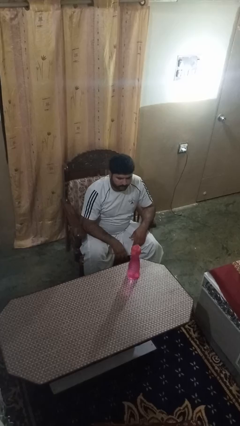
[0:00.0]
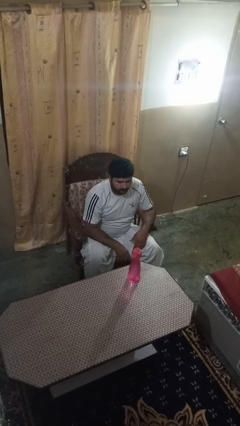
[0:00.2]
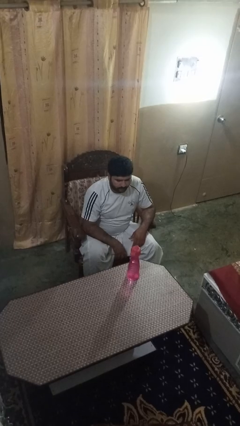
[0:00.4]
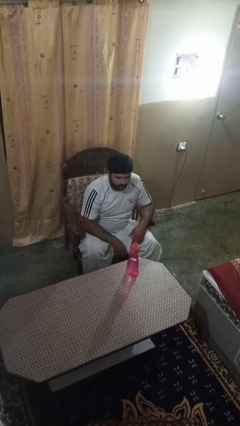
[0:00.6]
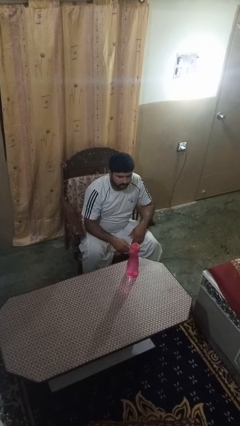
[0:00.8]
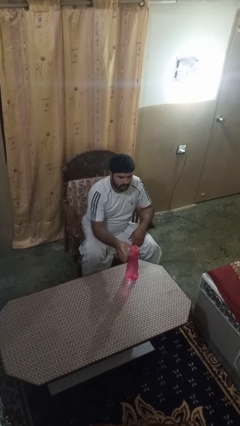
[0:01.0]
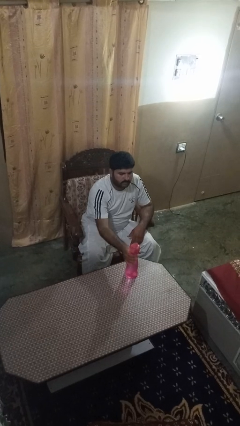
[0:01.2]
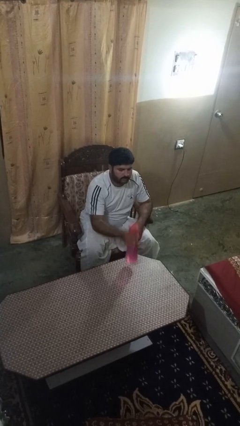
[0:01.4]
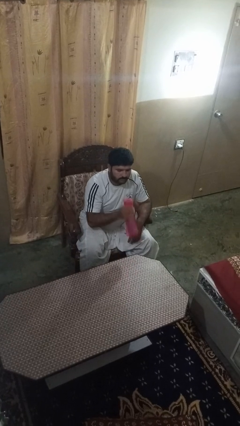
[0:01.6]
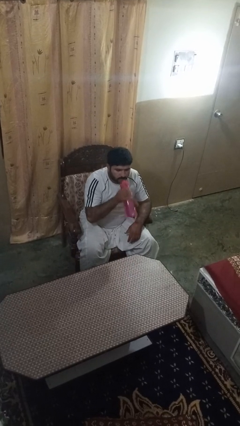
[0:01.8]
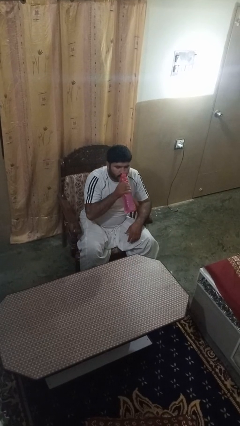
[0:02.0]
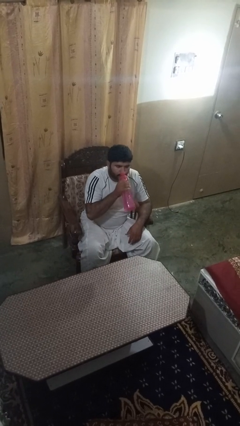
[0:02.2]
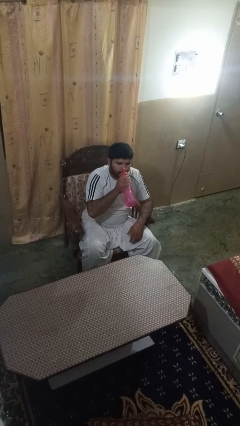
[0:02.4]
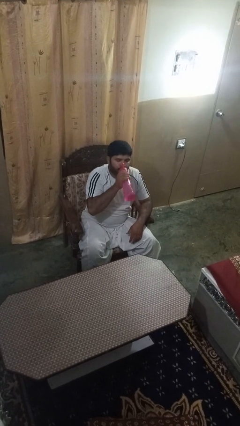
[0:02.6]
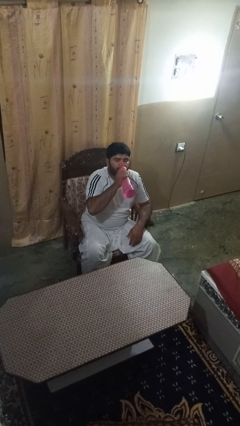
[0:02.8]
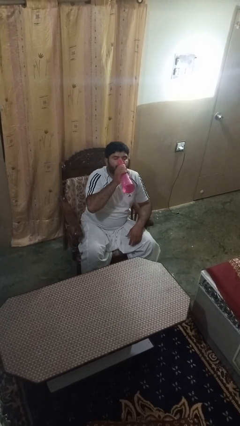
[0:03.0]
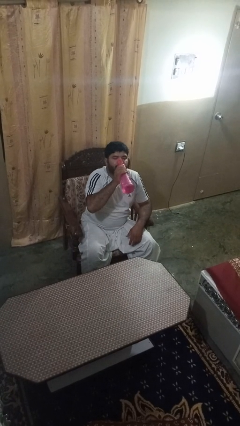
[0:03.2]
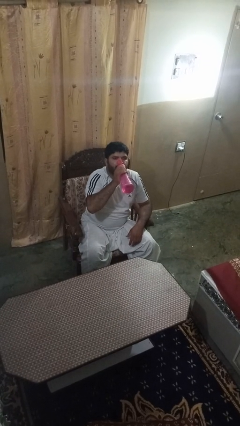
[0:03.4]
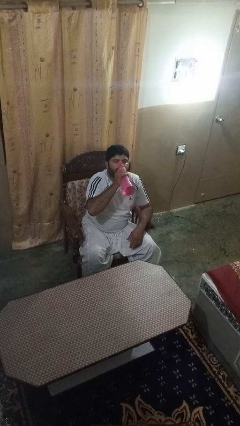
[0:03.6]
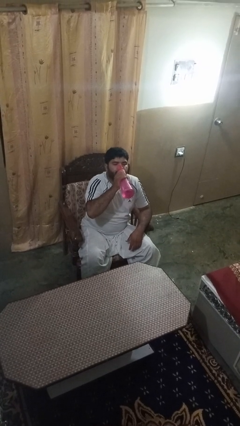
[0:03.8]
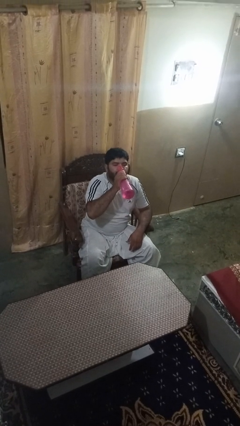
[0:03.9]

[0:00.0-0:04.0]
person drinks from bottle

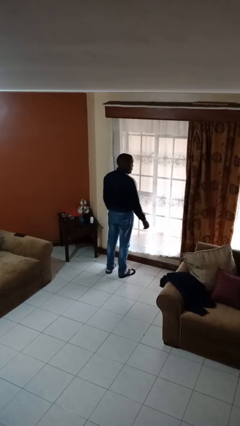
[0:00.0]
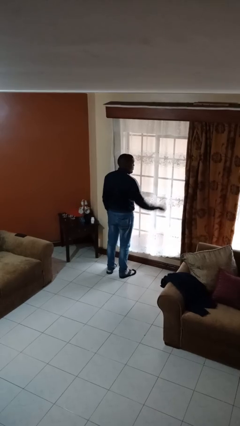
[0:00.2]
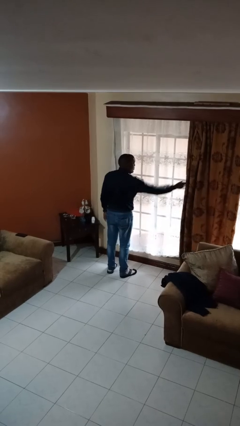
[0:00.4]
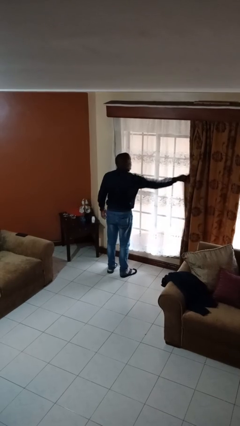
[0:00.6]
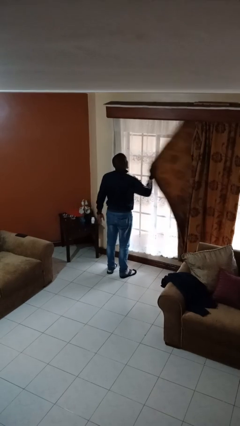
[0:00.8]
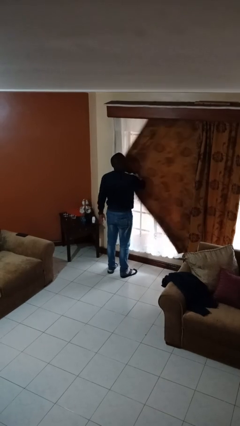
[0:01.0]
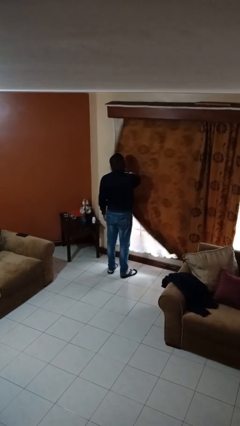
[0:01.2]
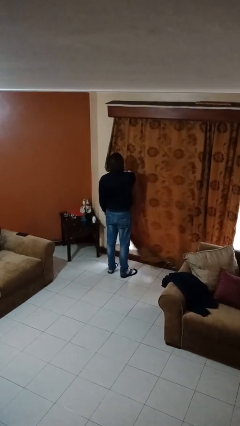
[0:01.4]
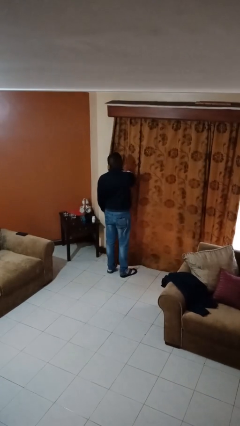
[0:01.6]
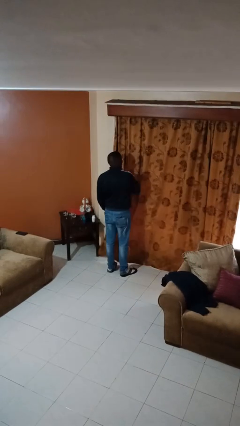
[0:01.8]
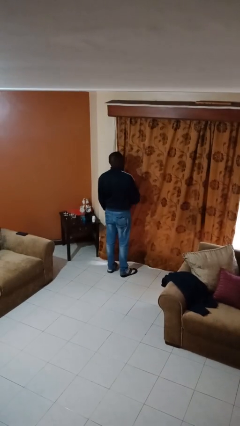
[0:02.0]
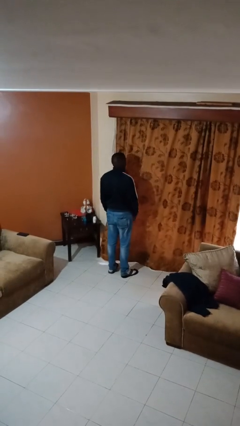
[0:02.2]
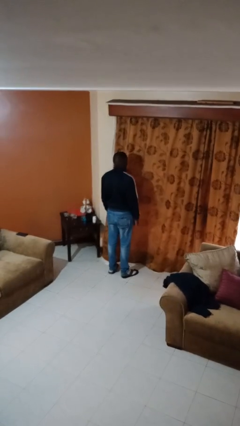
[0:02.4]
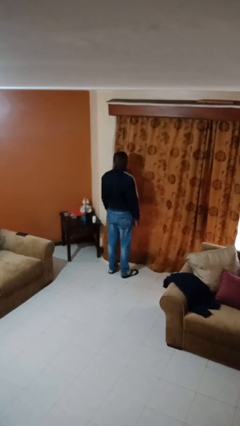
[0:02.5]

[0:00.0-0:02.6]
person closes curtains

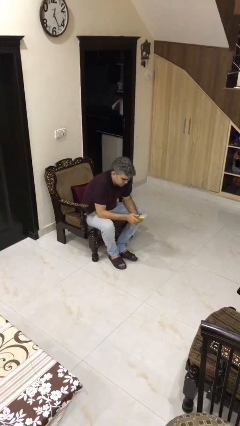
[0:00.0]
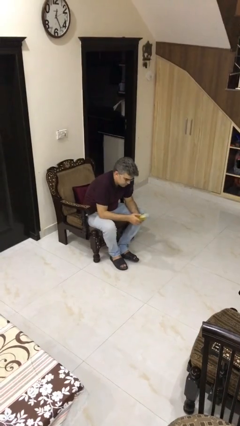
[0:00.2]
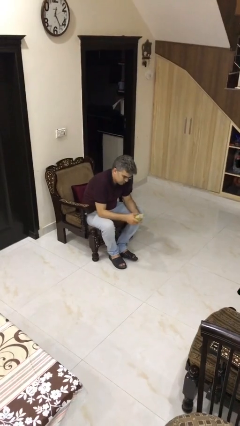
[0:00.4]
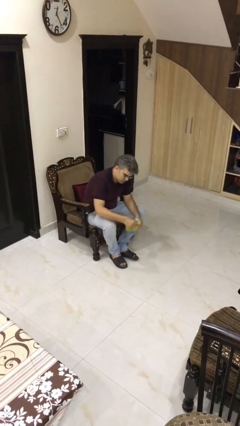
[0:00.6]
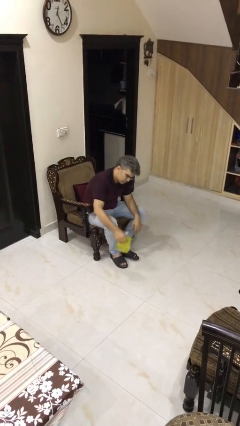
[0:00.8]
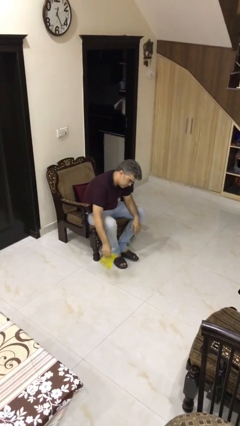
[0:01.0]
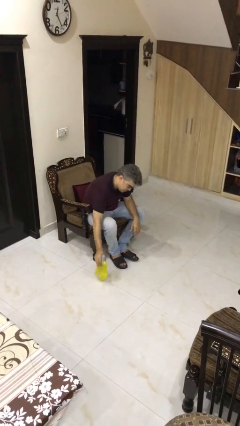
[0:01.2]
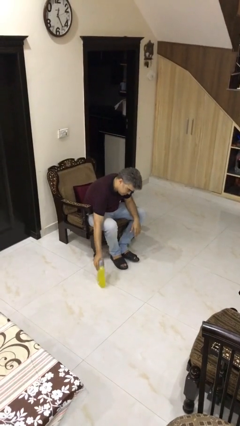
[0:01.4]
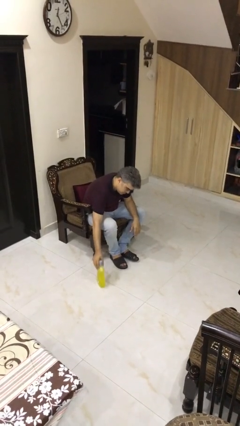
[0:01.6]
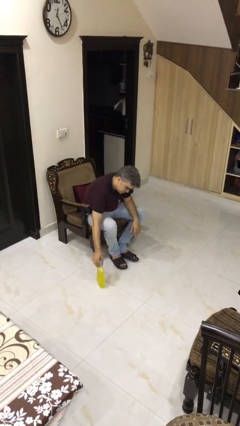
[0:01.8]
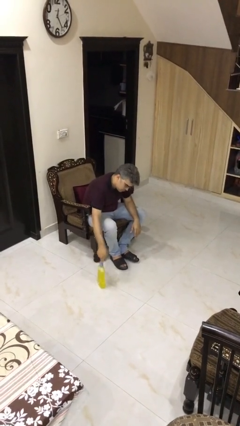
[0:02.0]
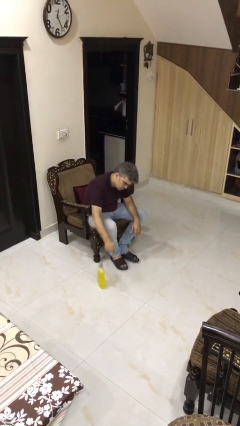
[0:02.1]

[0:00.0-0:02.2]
person puts down object on floor

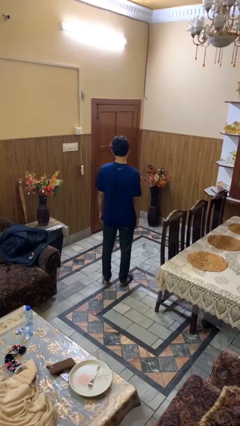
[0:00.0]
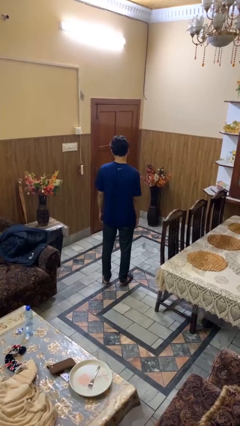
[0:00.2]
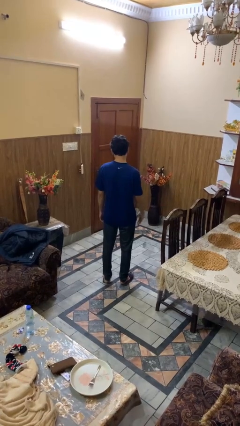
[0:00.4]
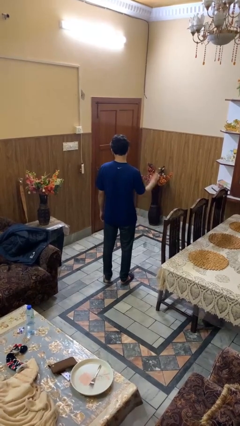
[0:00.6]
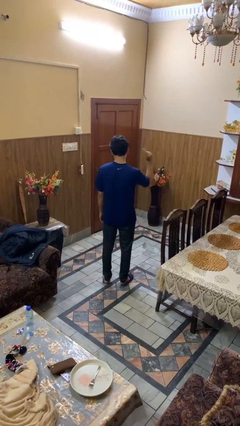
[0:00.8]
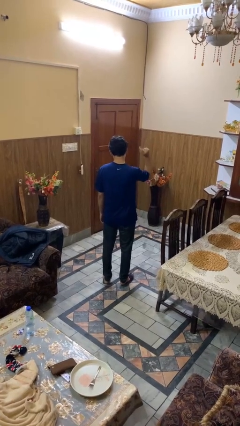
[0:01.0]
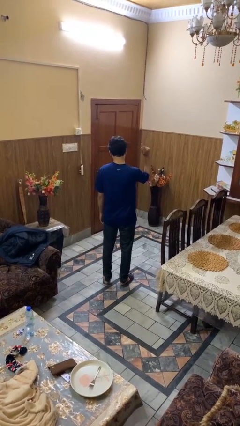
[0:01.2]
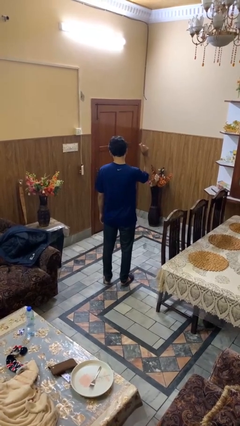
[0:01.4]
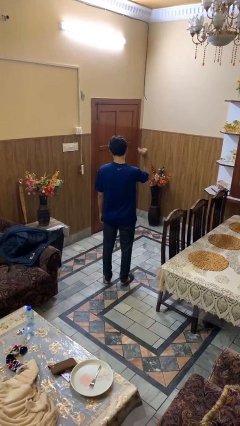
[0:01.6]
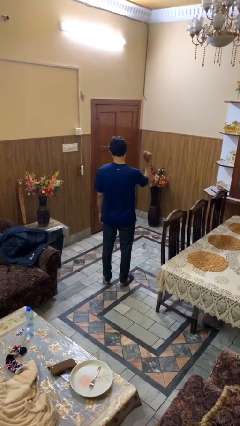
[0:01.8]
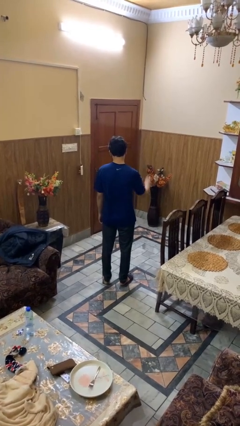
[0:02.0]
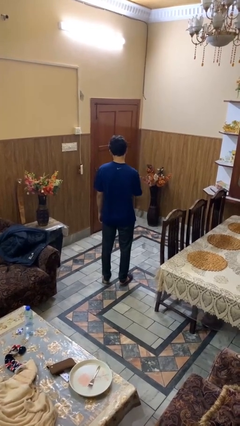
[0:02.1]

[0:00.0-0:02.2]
person snaps fingers

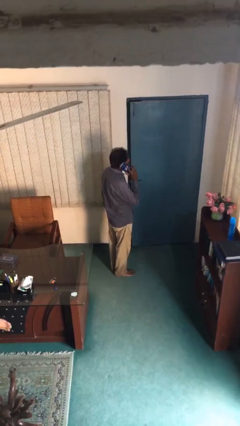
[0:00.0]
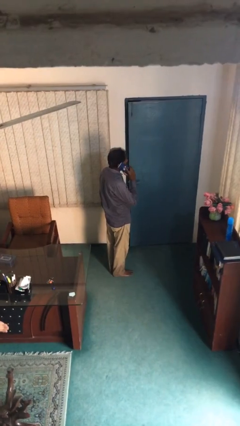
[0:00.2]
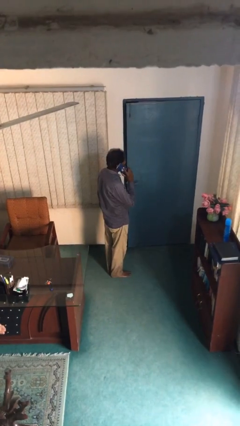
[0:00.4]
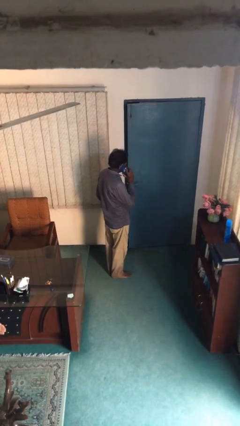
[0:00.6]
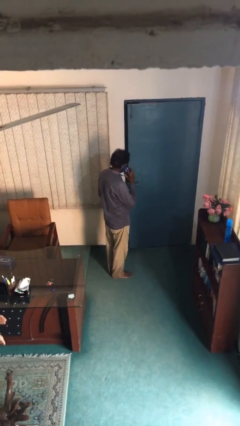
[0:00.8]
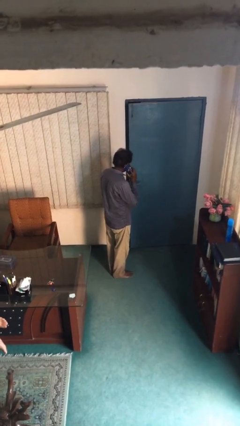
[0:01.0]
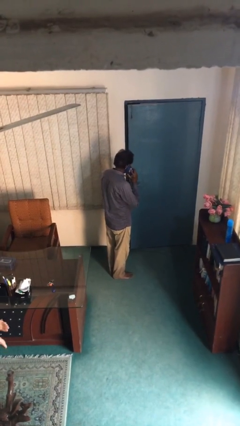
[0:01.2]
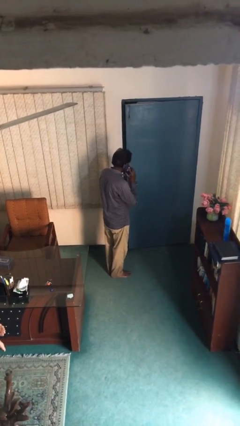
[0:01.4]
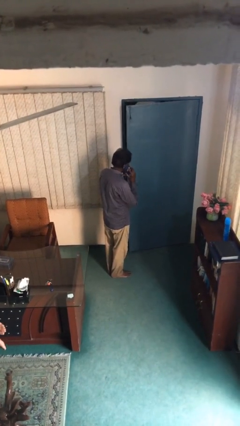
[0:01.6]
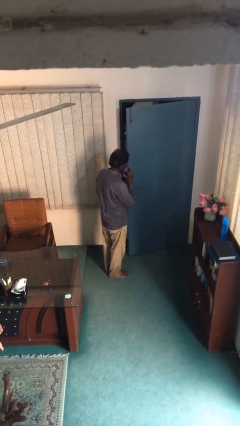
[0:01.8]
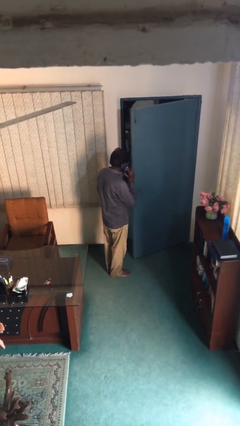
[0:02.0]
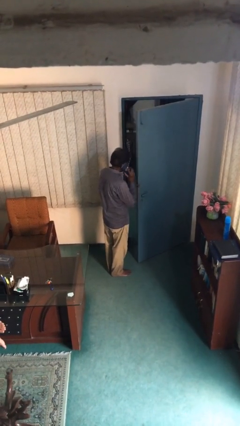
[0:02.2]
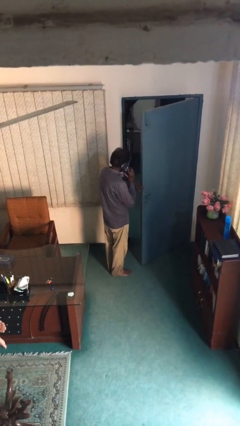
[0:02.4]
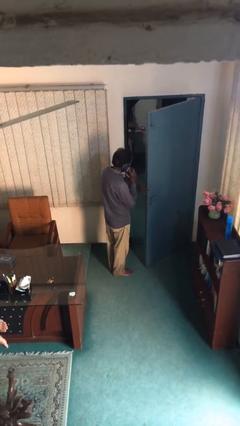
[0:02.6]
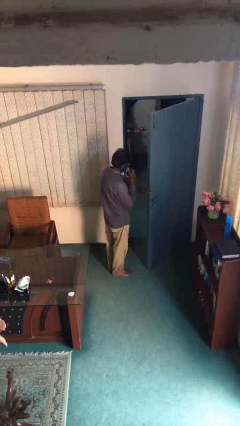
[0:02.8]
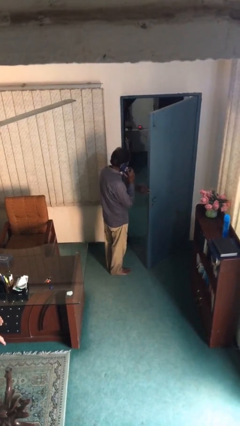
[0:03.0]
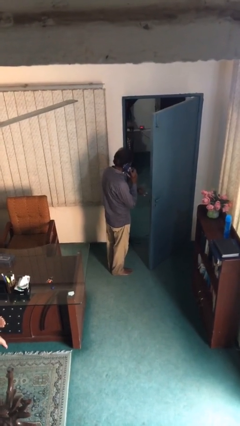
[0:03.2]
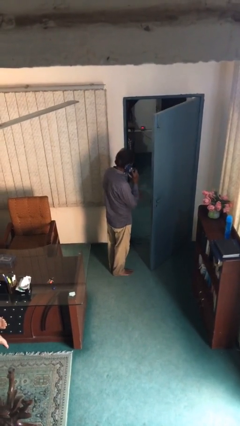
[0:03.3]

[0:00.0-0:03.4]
person opens facility door

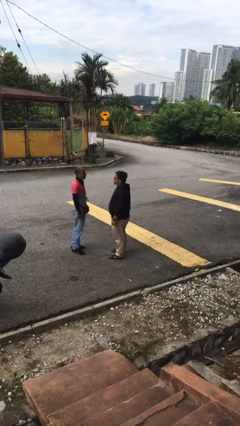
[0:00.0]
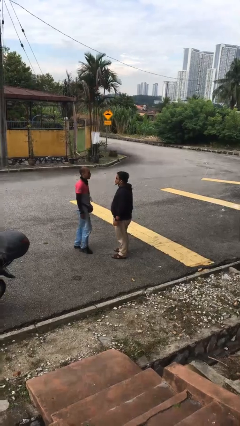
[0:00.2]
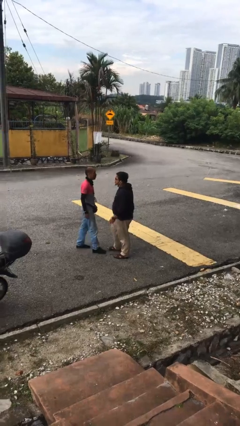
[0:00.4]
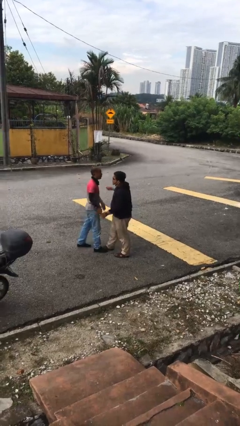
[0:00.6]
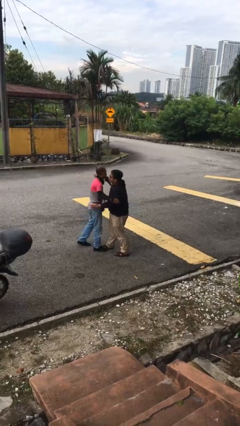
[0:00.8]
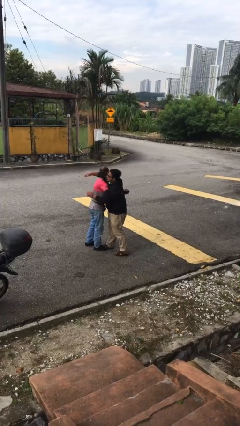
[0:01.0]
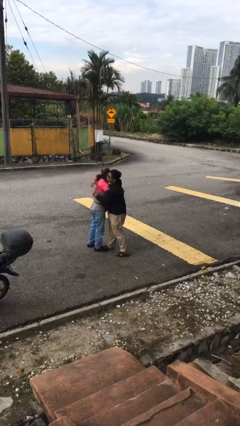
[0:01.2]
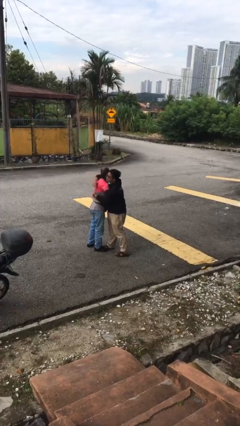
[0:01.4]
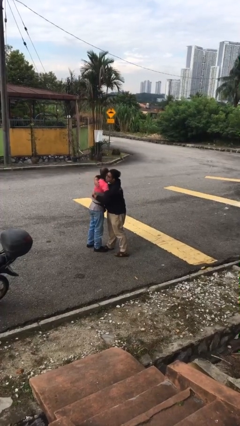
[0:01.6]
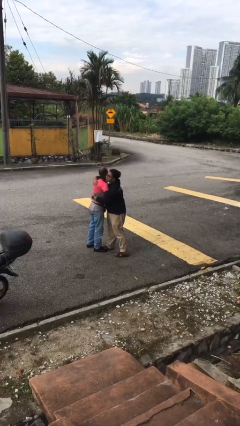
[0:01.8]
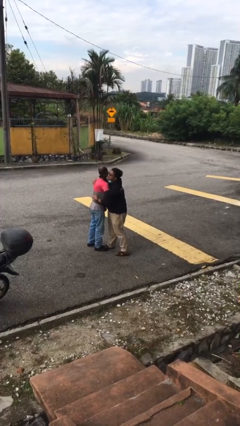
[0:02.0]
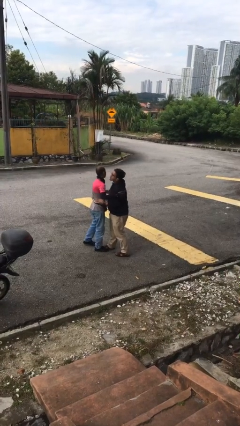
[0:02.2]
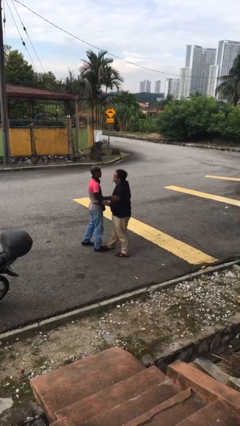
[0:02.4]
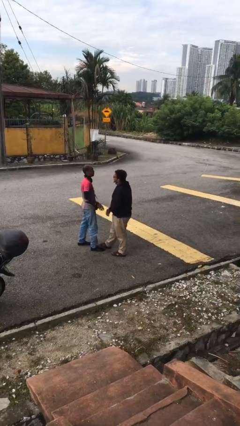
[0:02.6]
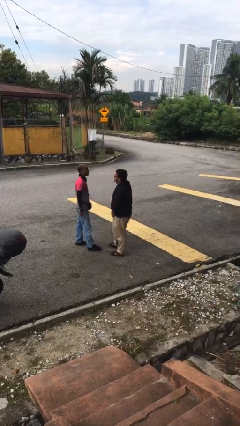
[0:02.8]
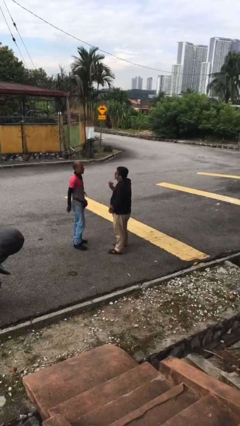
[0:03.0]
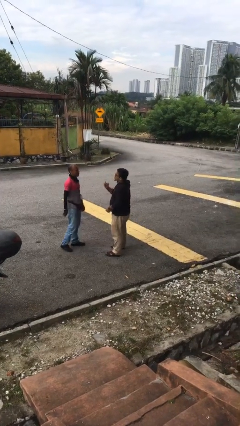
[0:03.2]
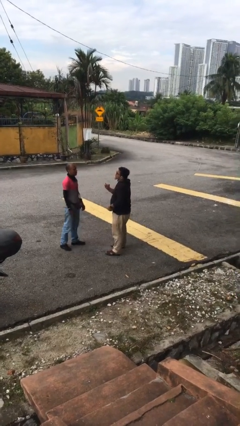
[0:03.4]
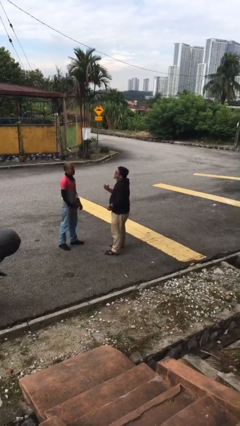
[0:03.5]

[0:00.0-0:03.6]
person embraces person
